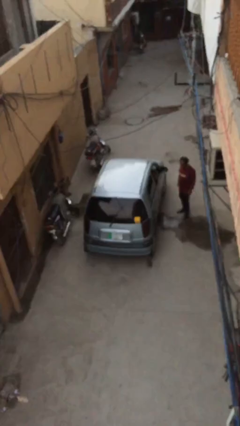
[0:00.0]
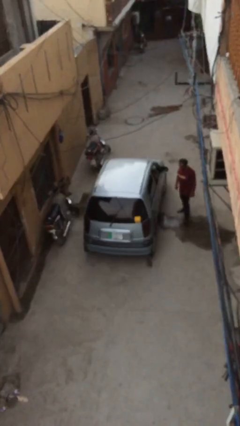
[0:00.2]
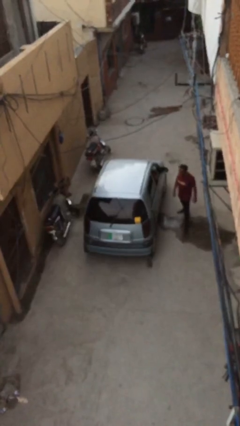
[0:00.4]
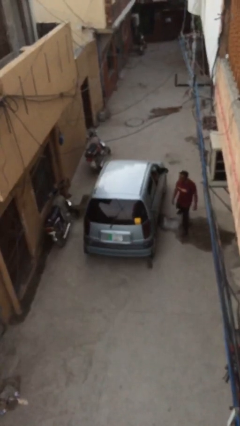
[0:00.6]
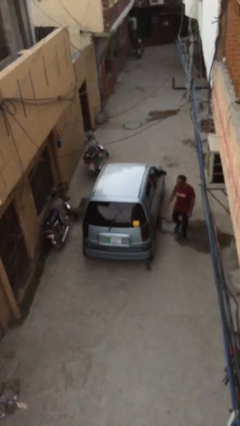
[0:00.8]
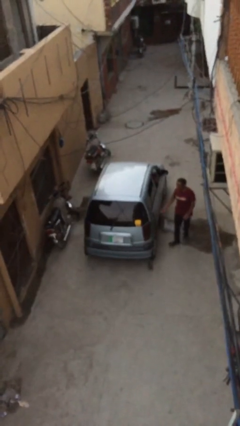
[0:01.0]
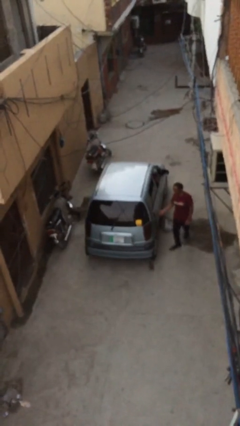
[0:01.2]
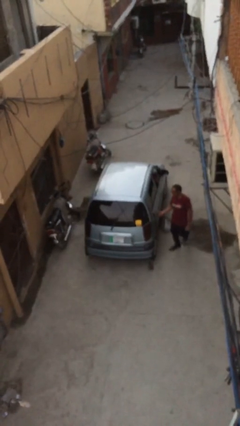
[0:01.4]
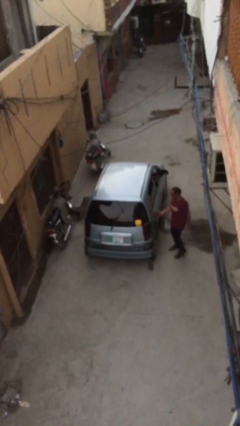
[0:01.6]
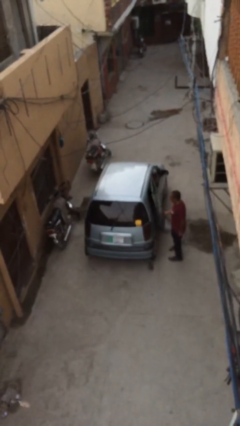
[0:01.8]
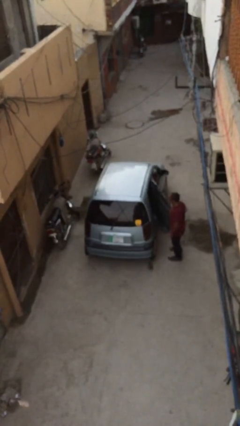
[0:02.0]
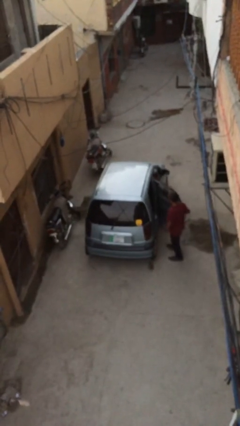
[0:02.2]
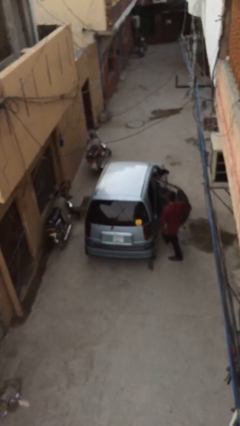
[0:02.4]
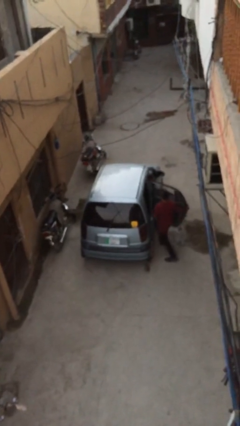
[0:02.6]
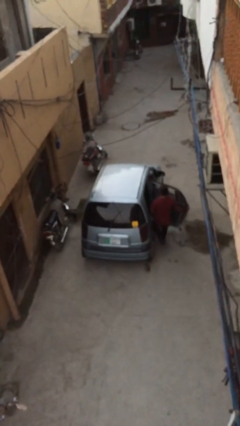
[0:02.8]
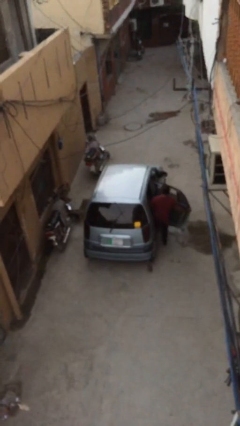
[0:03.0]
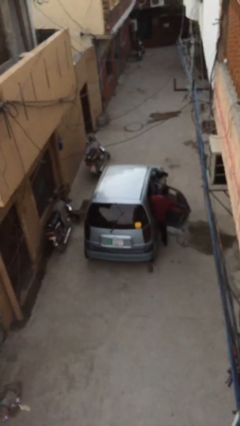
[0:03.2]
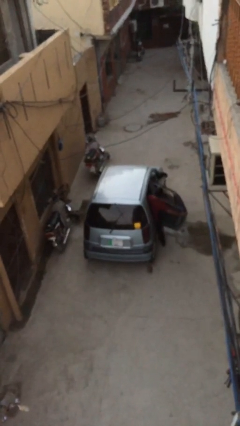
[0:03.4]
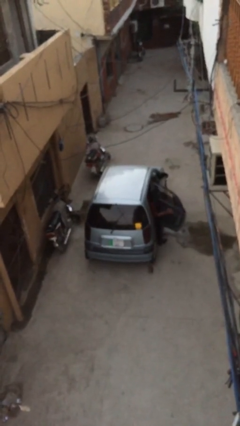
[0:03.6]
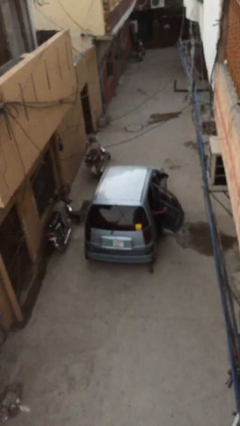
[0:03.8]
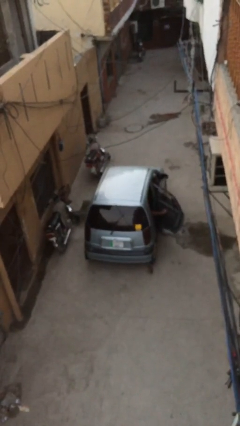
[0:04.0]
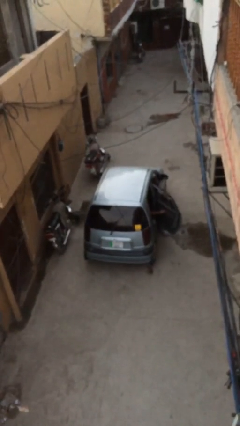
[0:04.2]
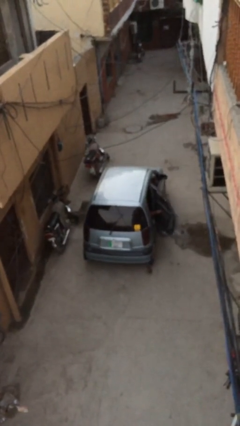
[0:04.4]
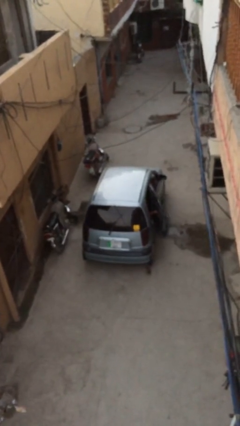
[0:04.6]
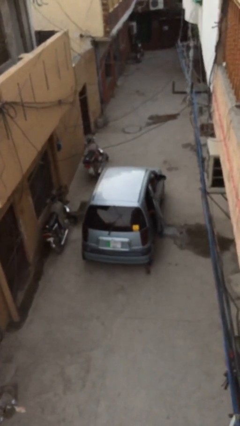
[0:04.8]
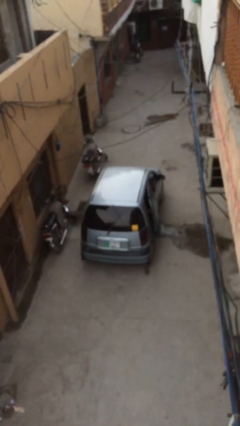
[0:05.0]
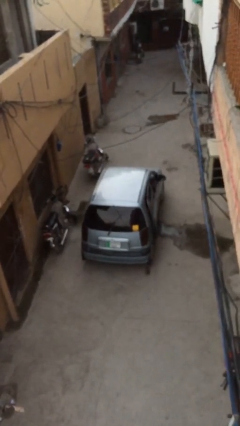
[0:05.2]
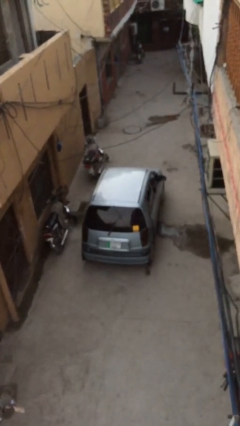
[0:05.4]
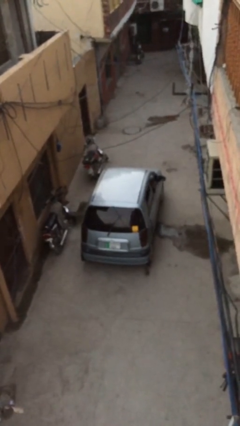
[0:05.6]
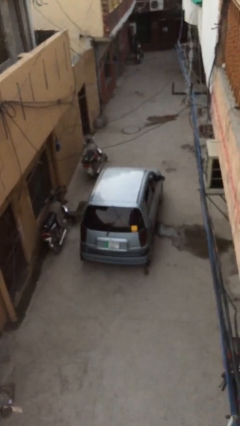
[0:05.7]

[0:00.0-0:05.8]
car picks up person

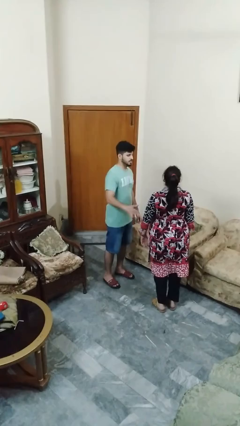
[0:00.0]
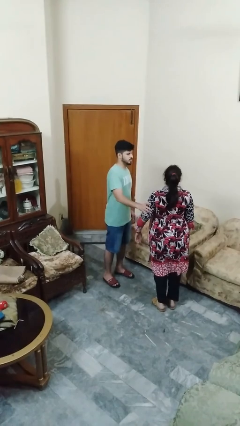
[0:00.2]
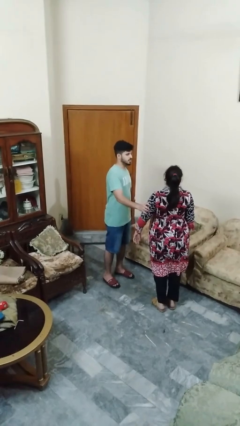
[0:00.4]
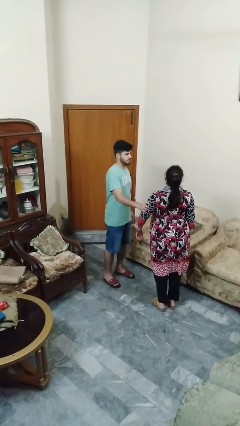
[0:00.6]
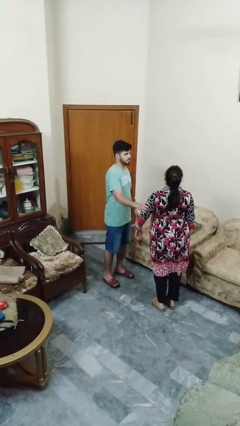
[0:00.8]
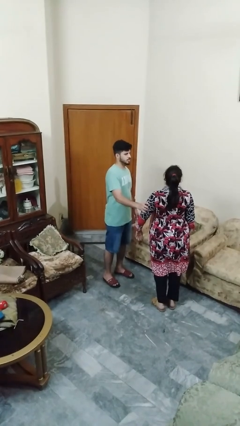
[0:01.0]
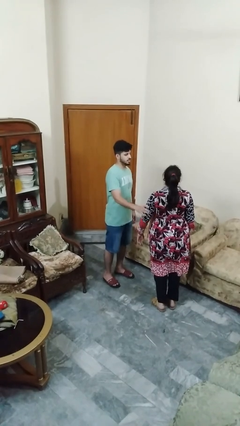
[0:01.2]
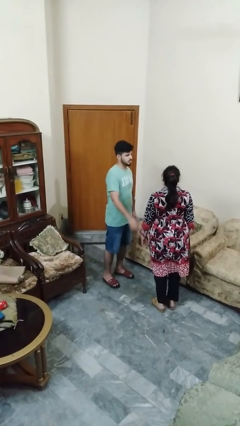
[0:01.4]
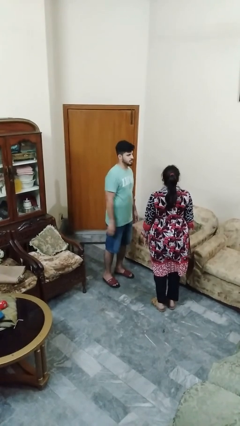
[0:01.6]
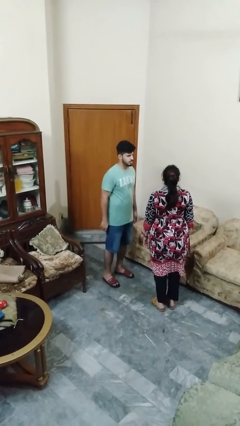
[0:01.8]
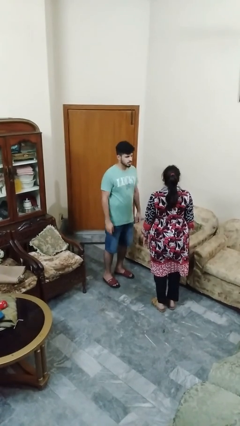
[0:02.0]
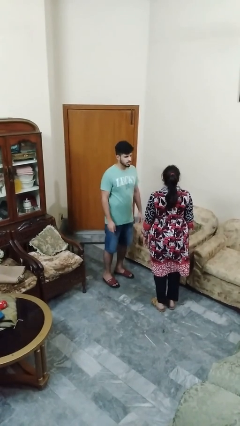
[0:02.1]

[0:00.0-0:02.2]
person grabs person by bicep

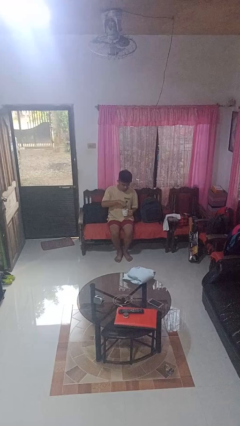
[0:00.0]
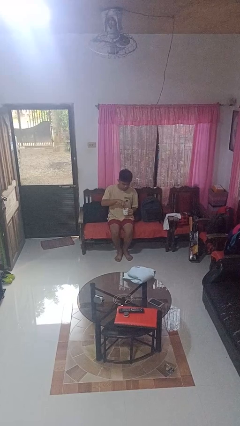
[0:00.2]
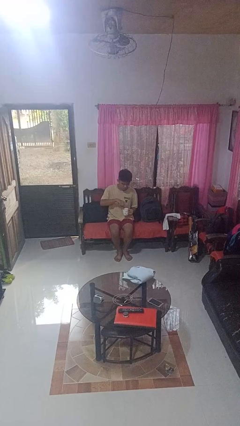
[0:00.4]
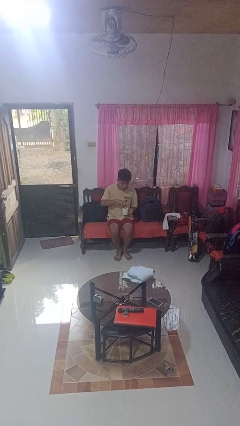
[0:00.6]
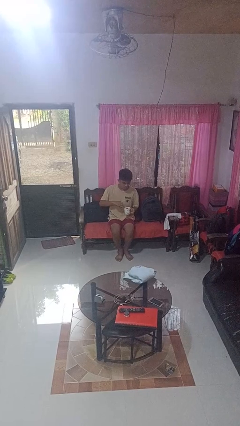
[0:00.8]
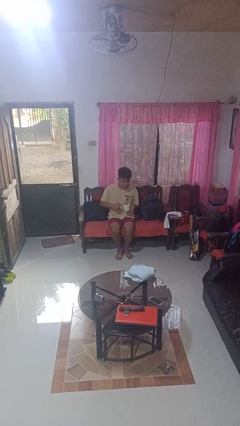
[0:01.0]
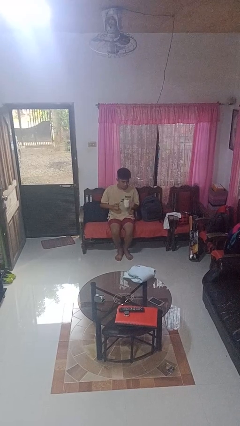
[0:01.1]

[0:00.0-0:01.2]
person stirs mug

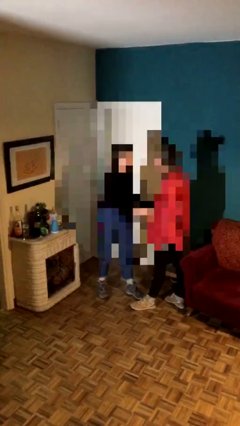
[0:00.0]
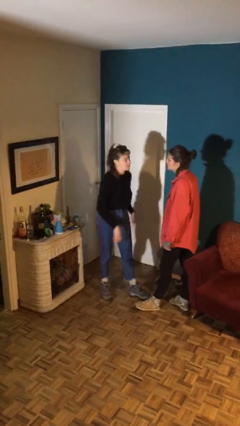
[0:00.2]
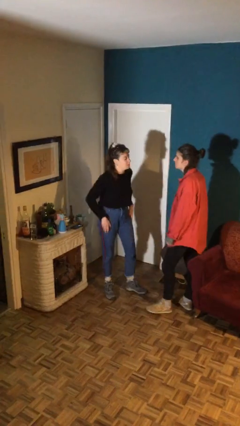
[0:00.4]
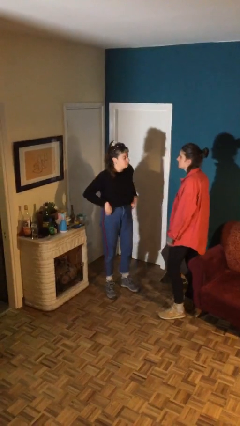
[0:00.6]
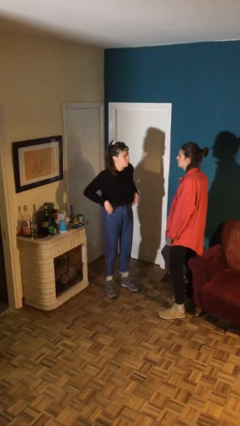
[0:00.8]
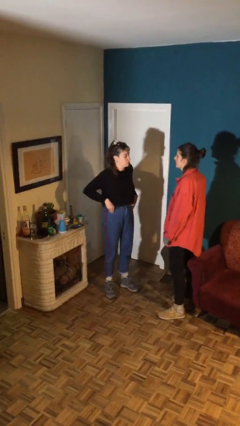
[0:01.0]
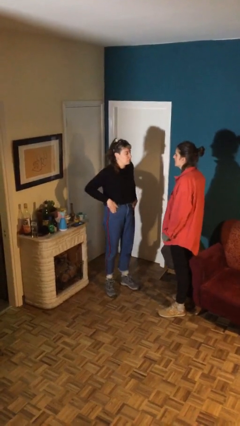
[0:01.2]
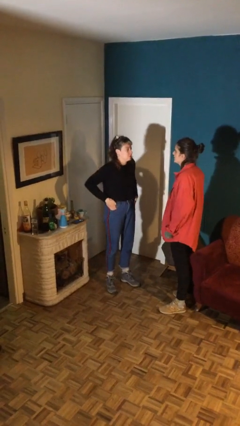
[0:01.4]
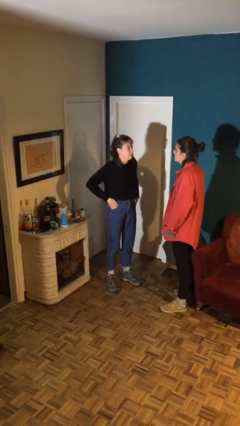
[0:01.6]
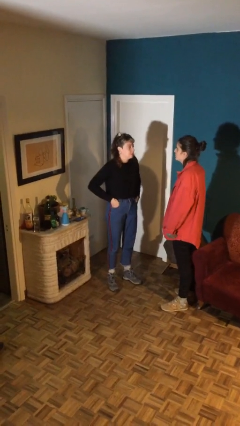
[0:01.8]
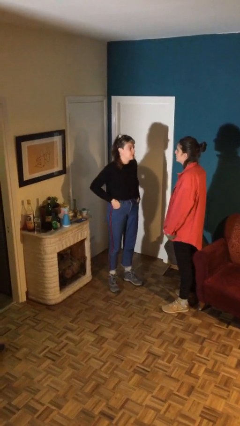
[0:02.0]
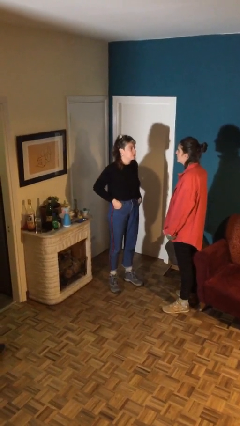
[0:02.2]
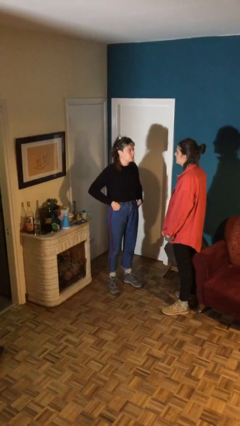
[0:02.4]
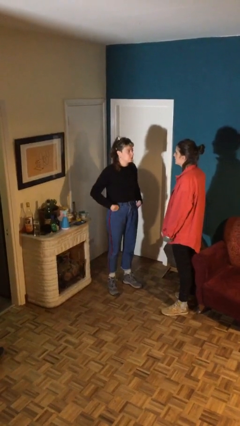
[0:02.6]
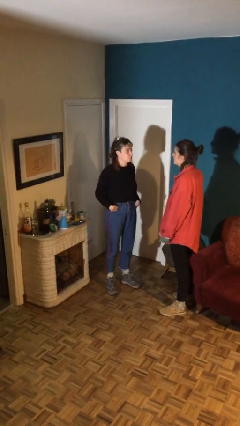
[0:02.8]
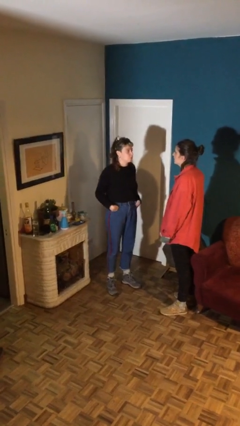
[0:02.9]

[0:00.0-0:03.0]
person talks to person

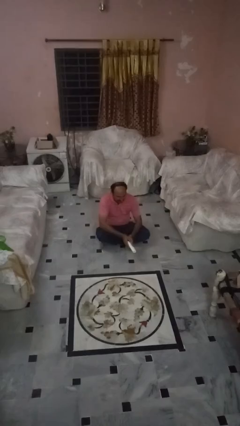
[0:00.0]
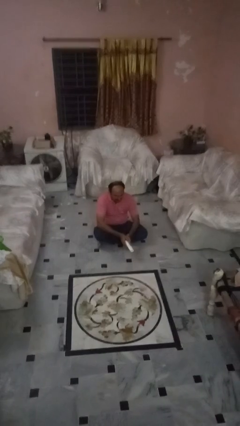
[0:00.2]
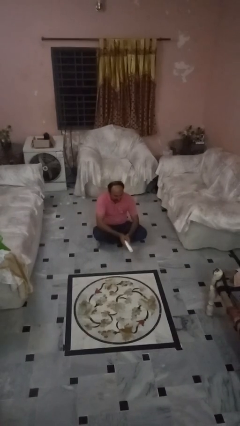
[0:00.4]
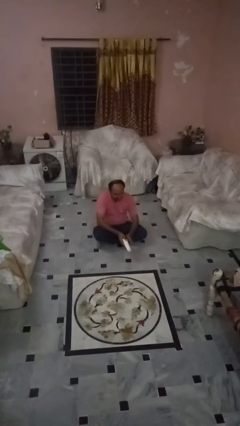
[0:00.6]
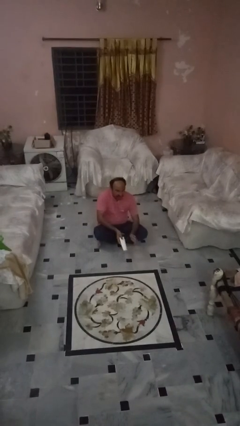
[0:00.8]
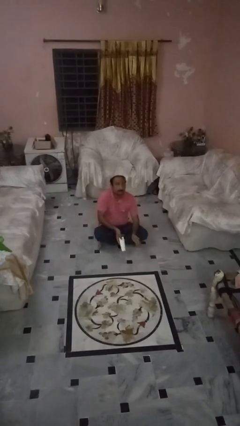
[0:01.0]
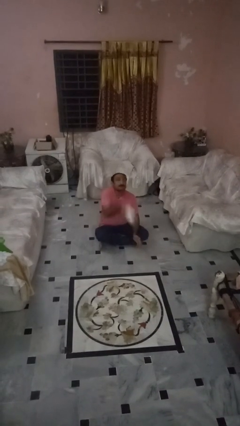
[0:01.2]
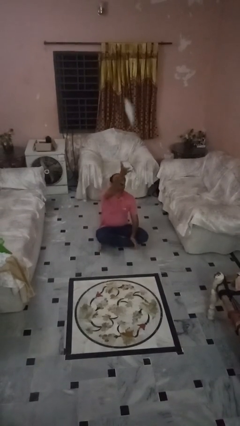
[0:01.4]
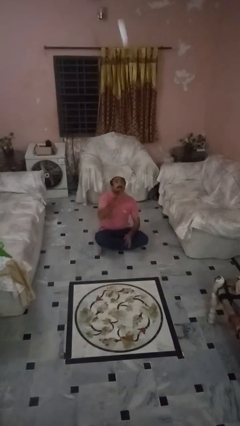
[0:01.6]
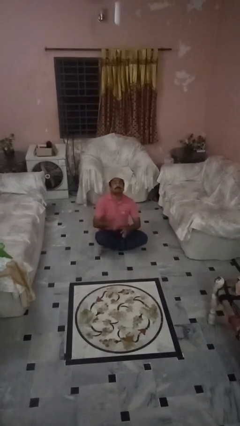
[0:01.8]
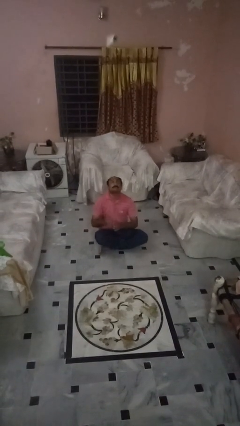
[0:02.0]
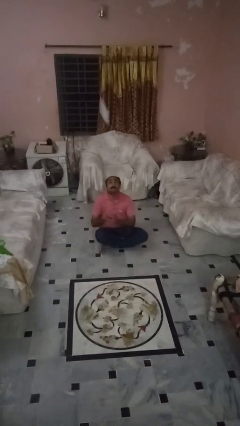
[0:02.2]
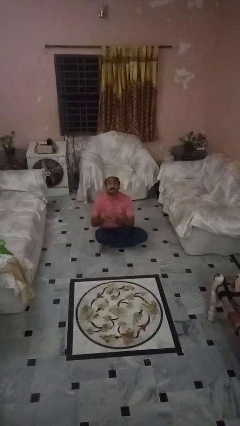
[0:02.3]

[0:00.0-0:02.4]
person drops object

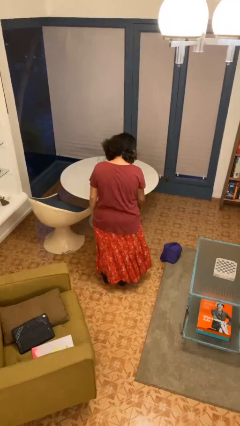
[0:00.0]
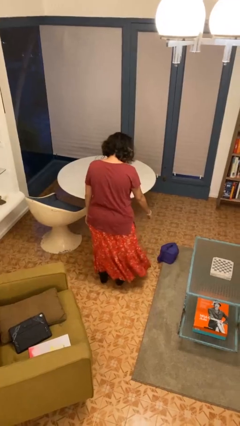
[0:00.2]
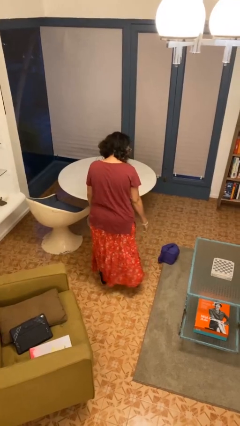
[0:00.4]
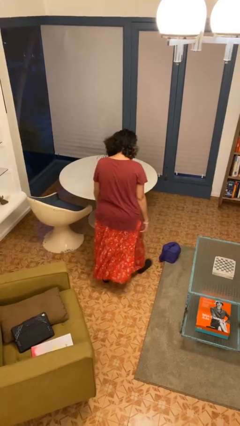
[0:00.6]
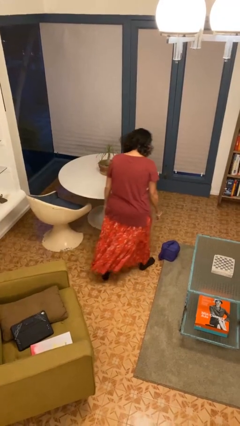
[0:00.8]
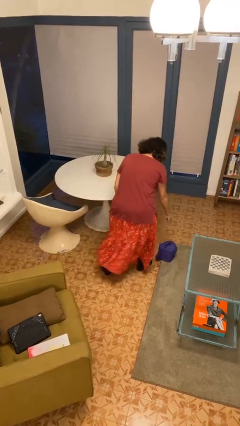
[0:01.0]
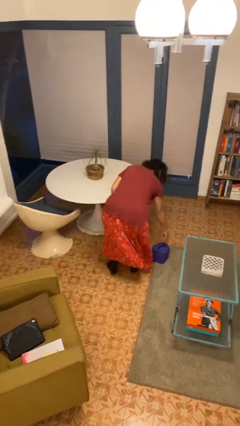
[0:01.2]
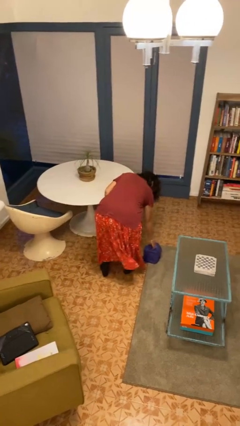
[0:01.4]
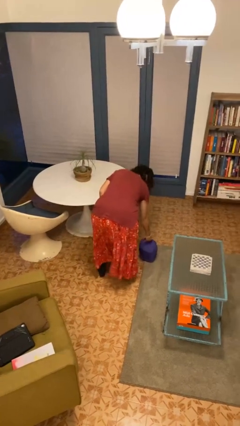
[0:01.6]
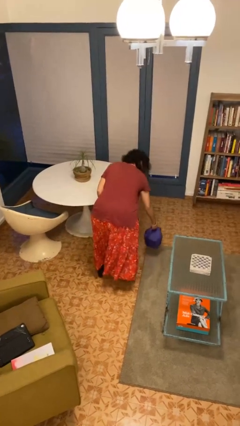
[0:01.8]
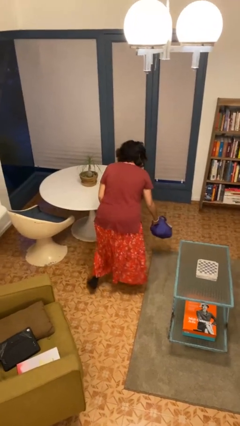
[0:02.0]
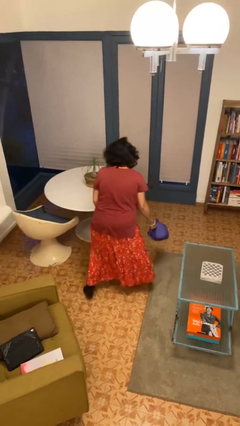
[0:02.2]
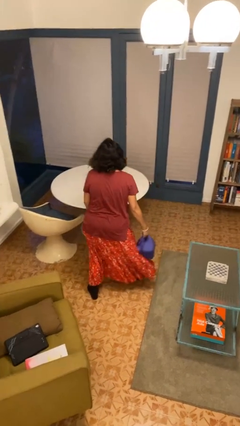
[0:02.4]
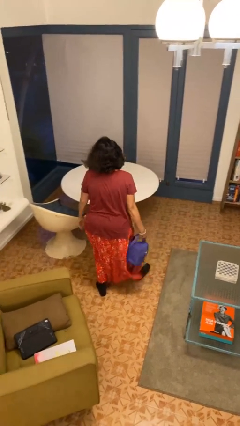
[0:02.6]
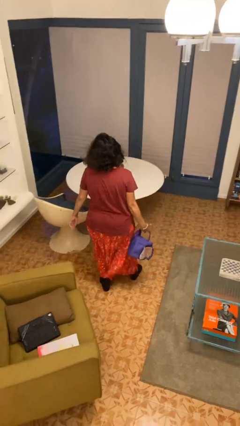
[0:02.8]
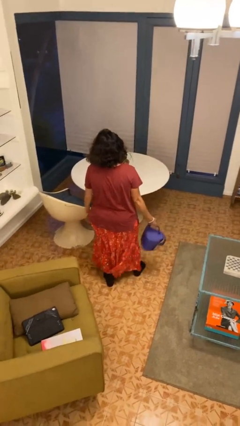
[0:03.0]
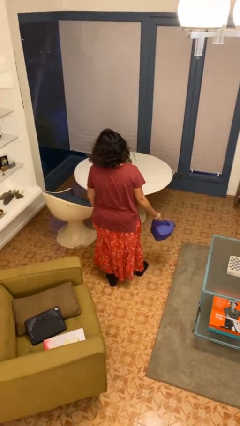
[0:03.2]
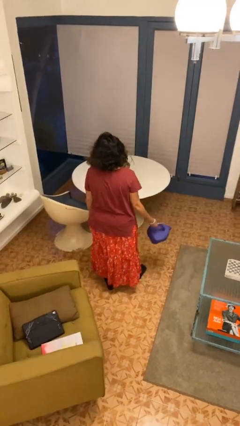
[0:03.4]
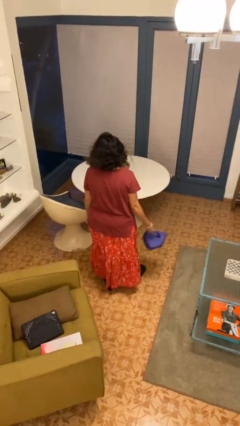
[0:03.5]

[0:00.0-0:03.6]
person picks up object from floor
